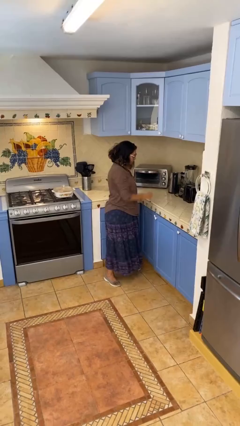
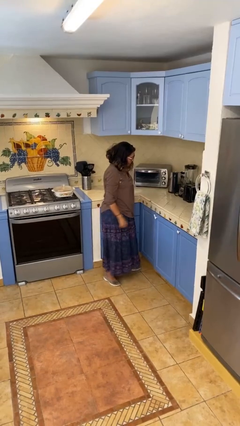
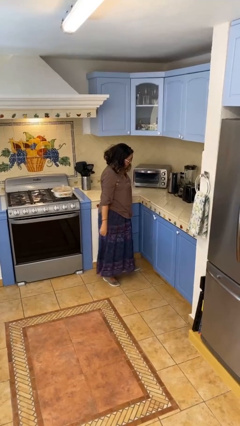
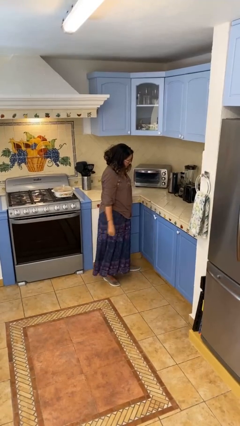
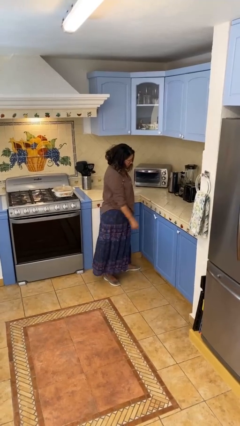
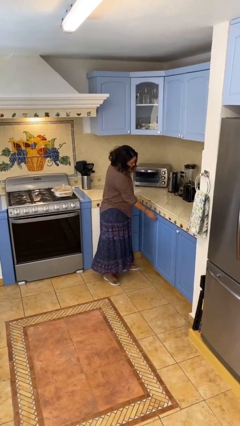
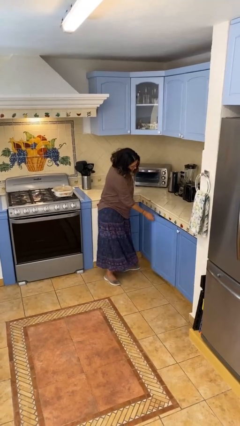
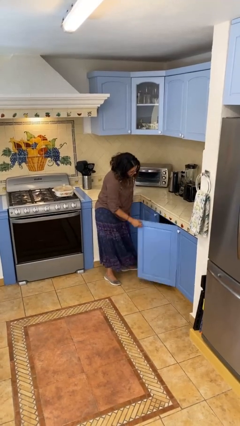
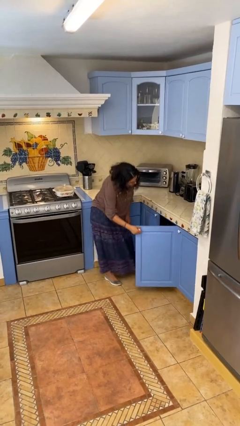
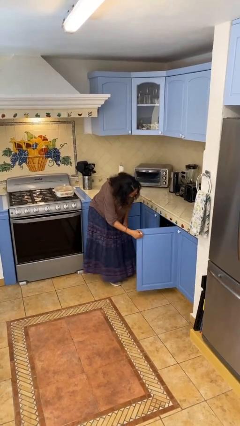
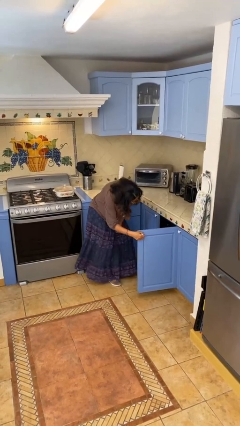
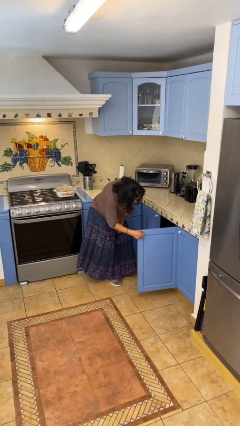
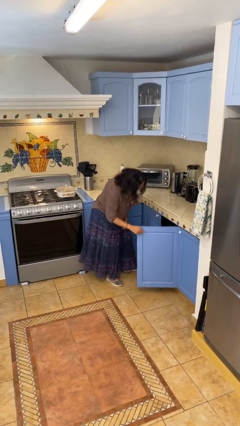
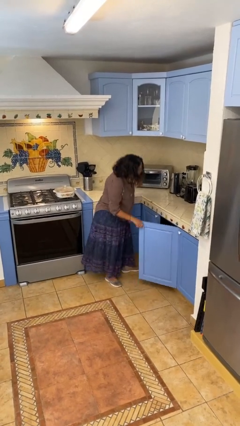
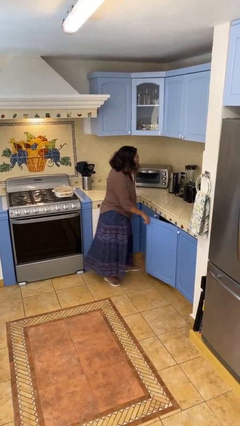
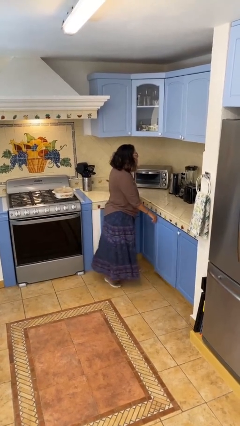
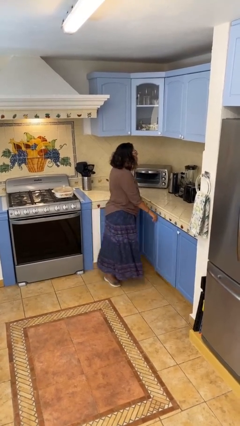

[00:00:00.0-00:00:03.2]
person closes cabinet

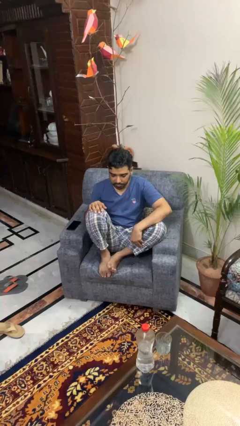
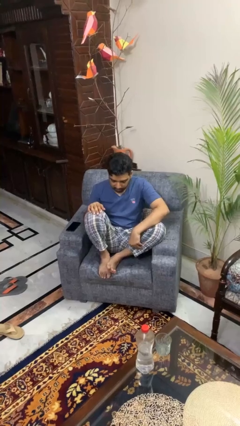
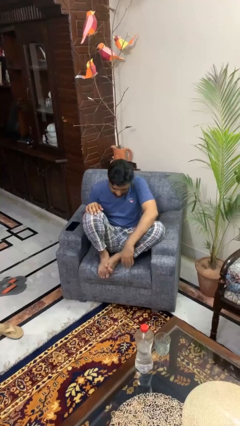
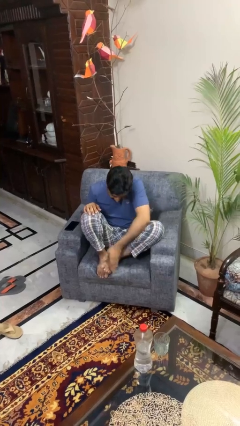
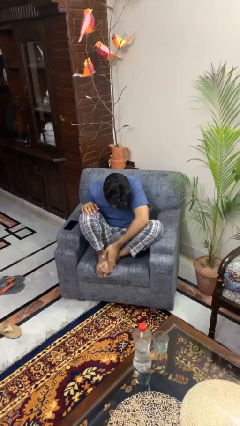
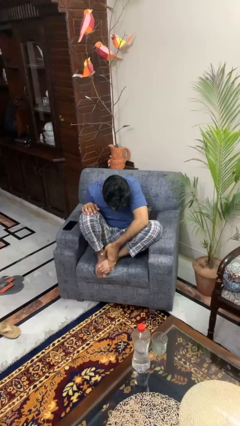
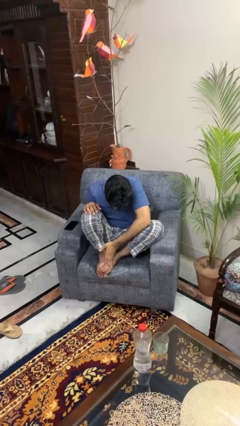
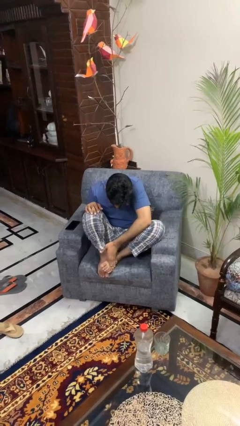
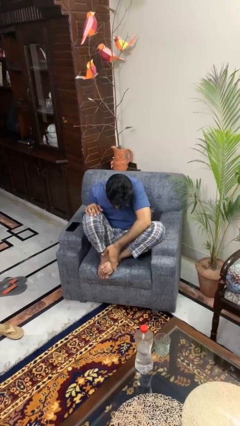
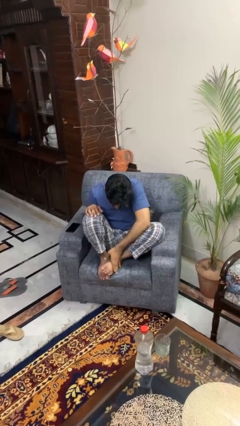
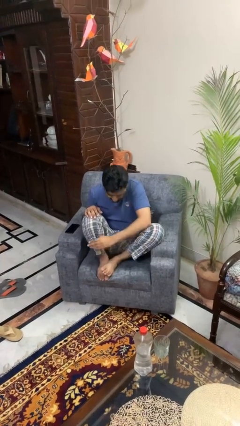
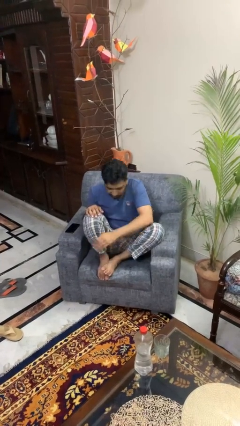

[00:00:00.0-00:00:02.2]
person rubs foot

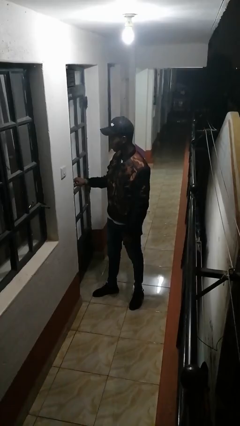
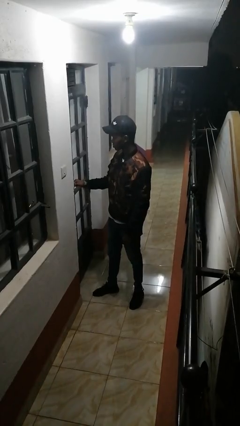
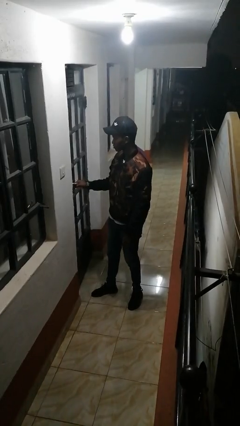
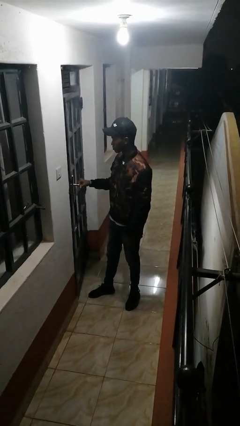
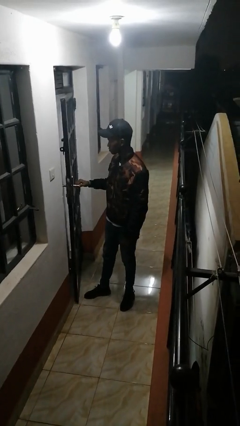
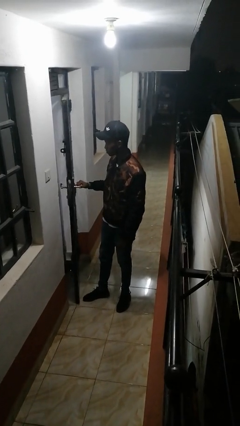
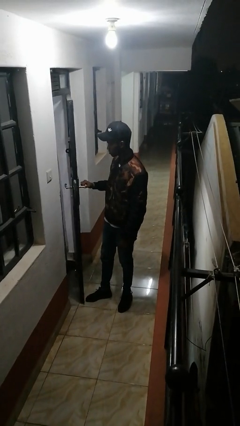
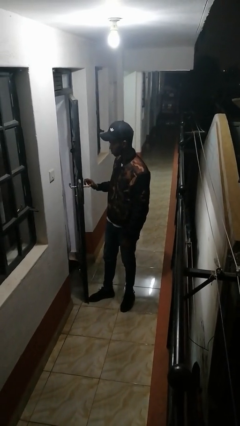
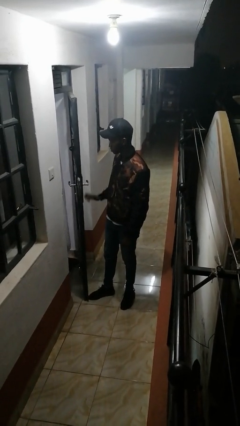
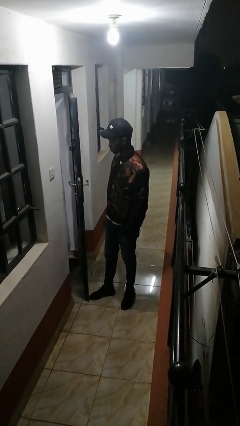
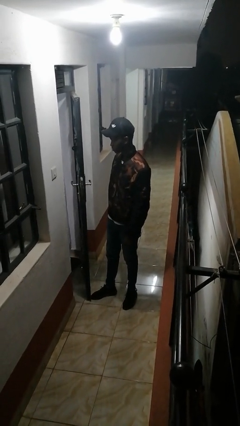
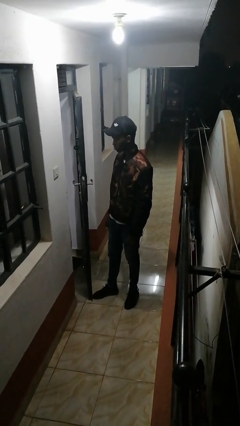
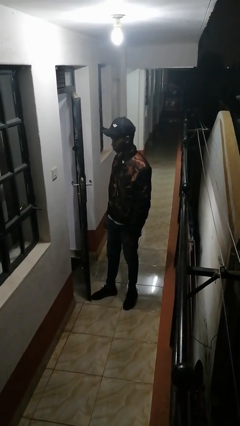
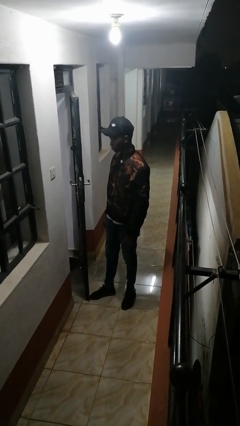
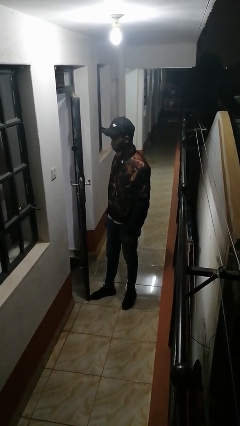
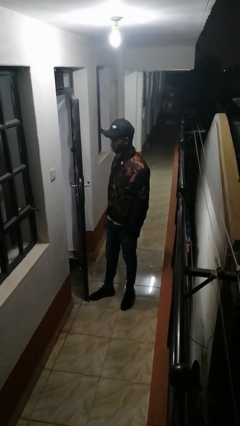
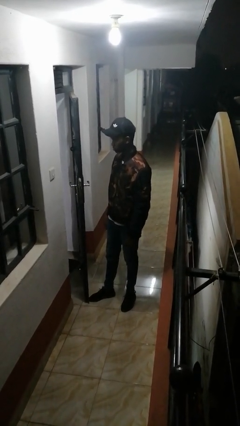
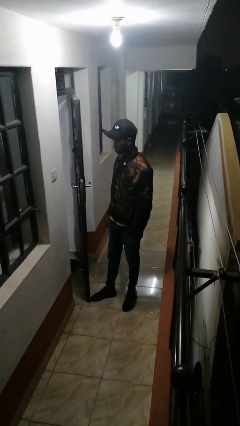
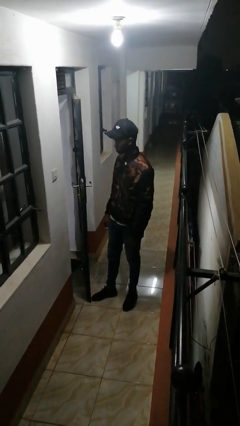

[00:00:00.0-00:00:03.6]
person opens facility door

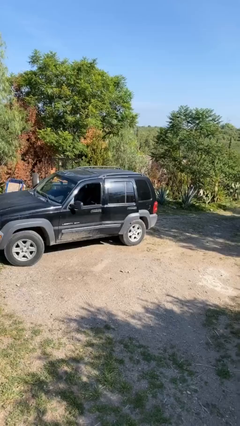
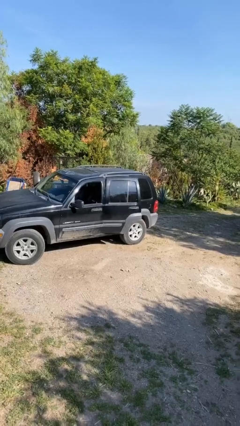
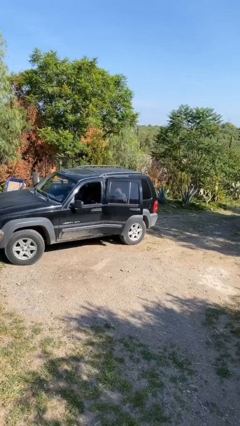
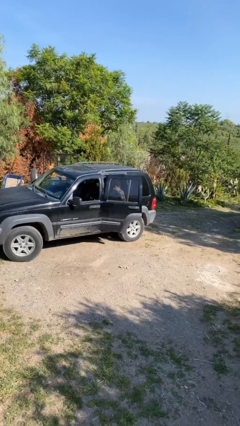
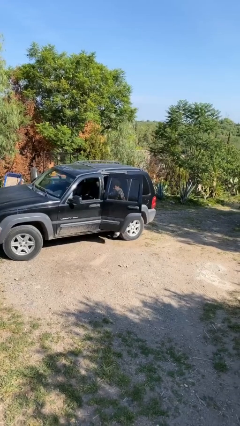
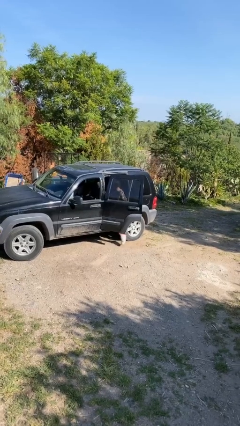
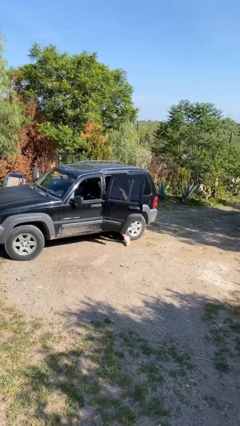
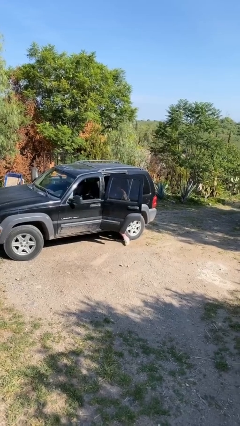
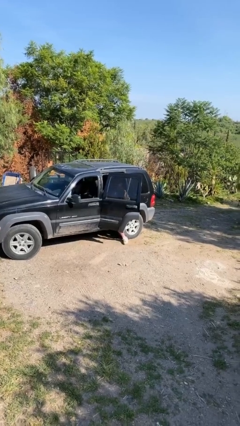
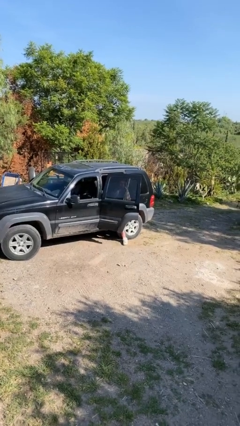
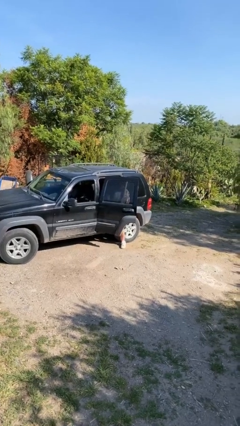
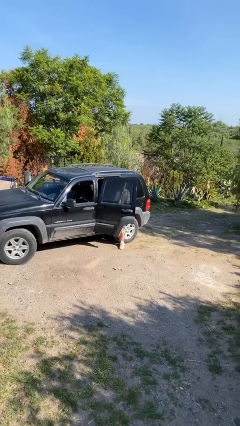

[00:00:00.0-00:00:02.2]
person opens car door

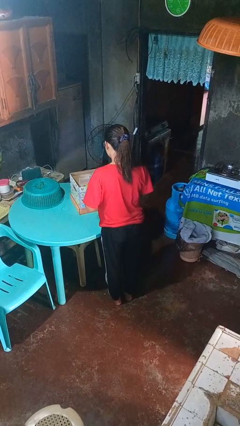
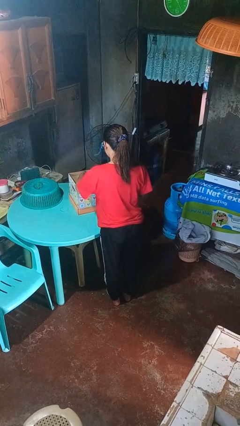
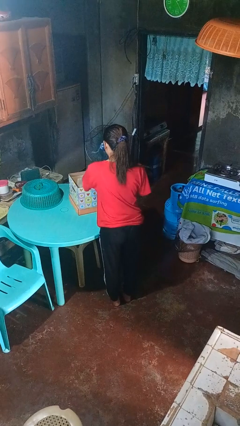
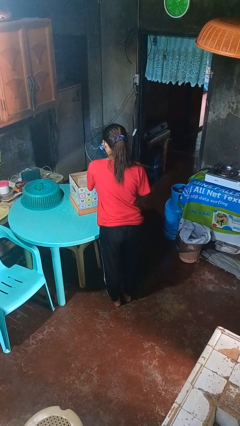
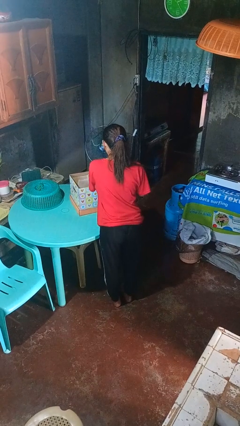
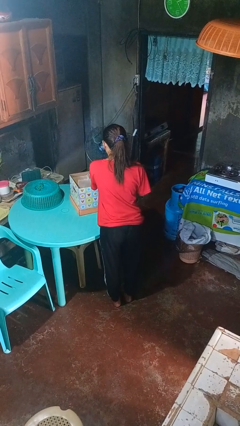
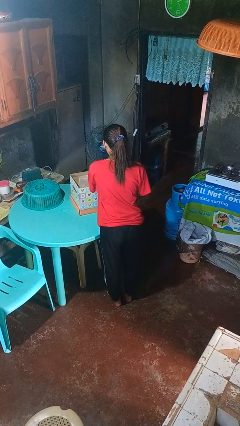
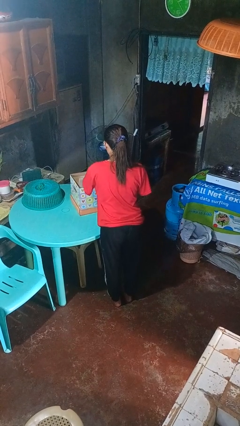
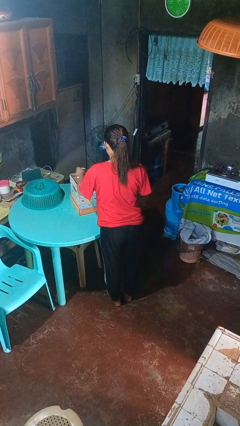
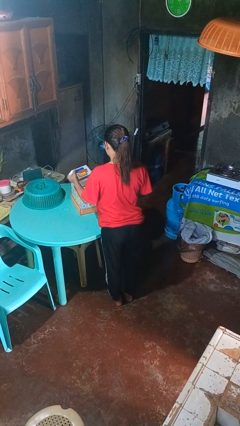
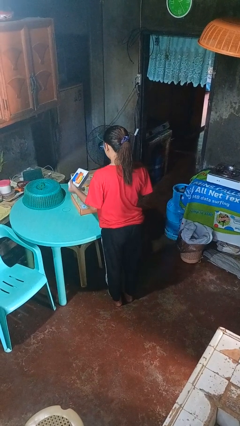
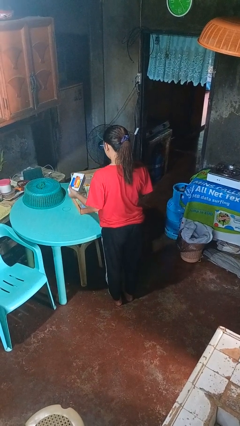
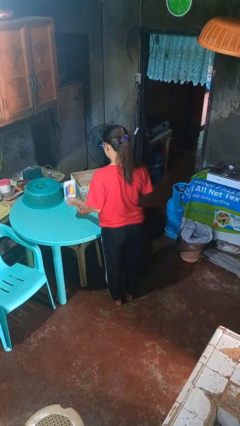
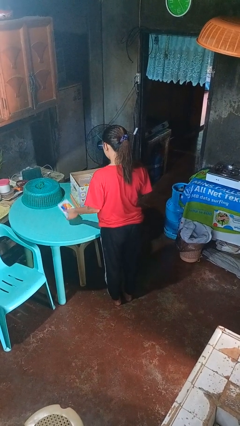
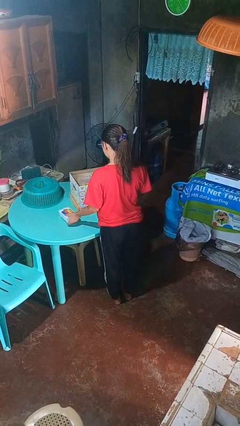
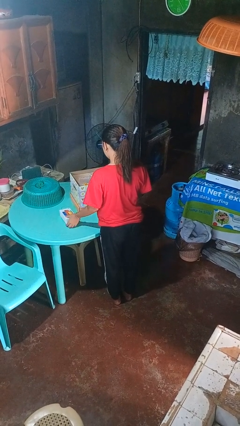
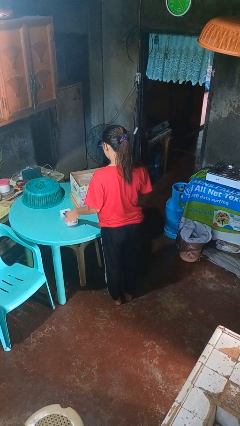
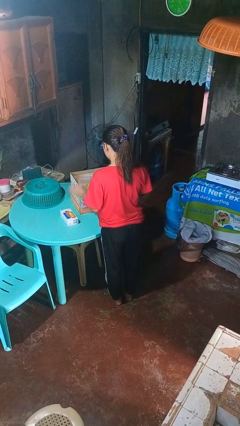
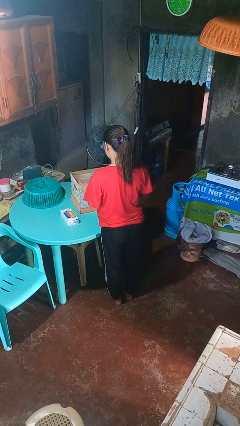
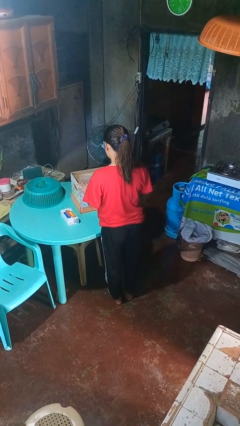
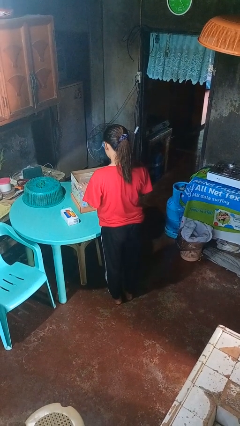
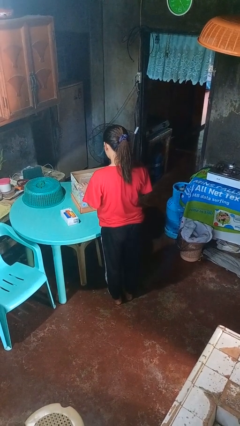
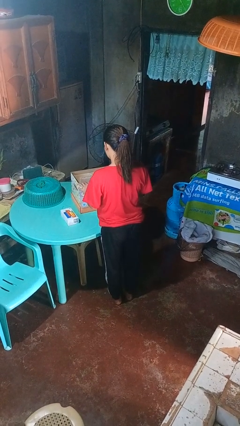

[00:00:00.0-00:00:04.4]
person takes object from box

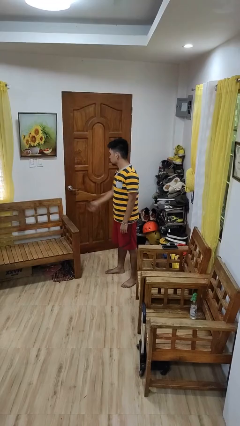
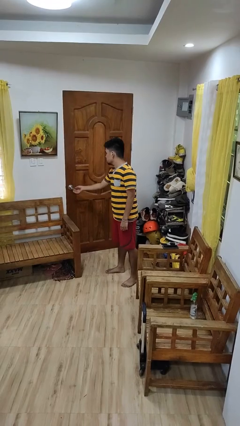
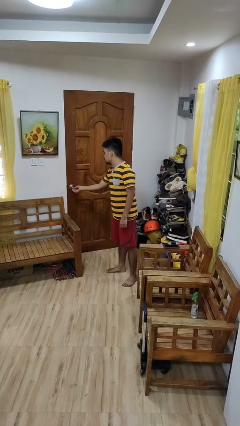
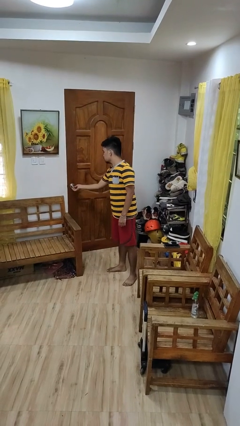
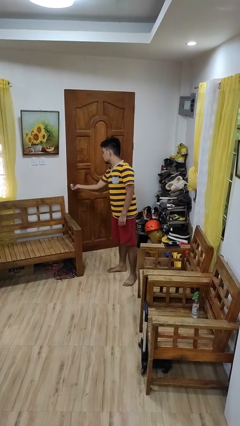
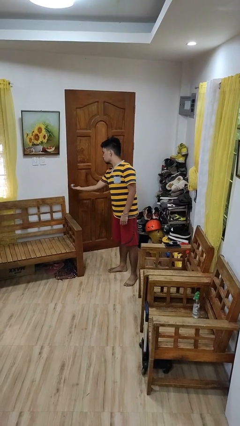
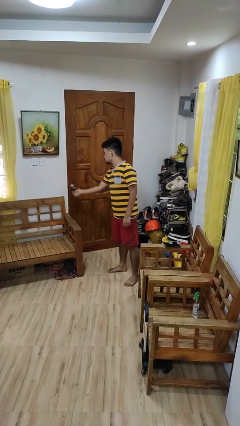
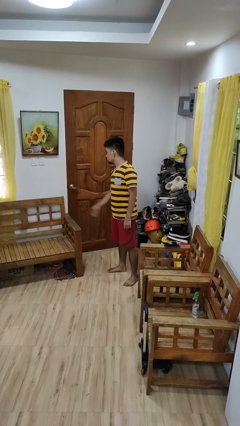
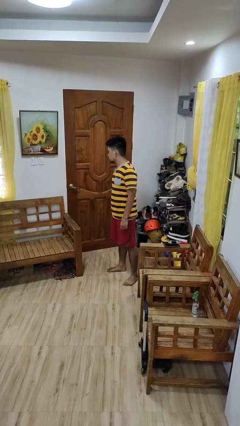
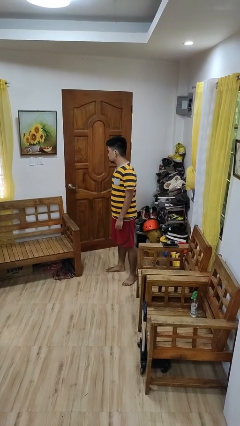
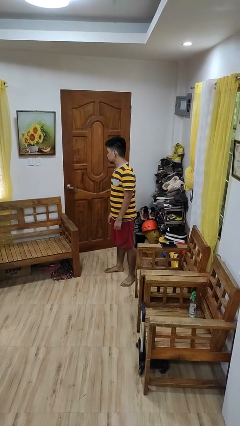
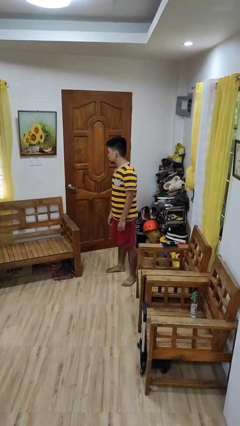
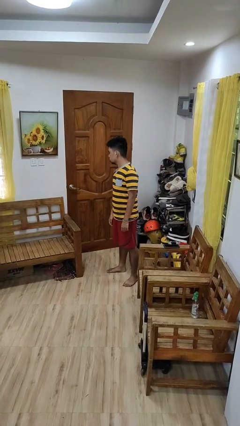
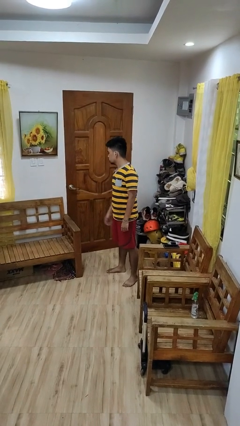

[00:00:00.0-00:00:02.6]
person unlocks door with keys
